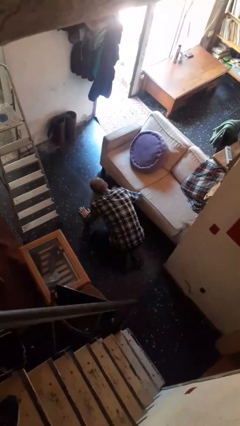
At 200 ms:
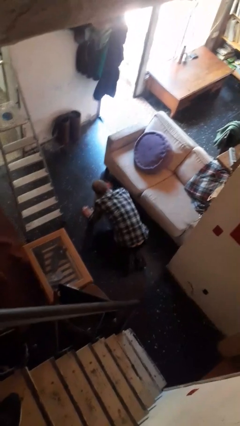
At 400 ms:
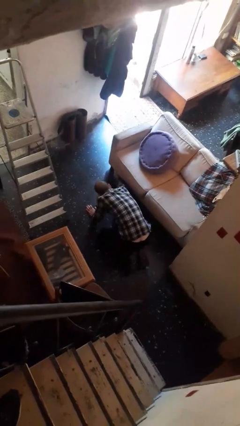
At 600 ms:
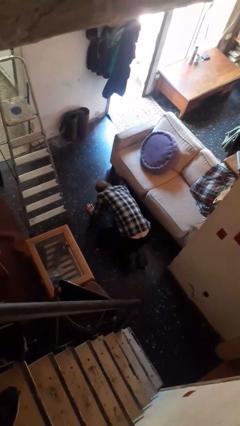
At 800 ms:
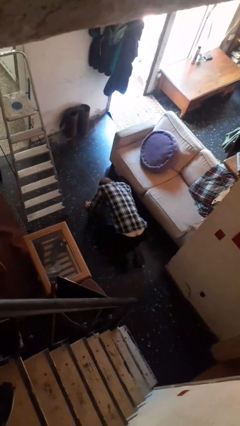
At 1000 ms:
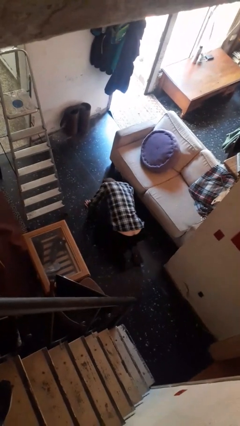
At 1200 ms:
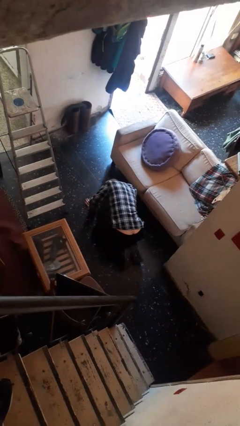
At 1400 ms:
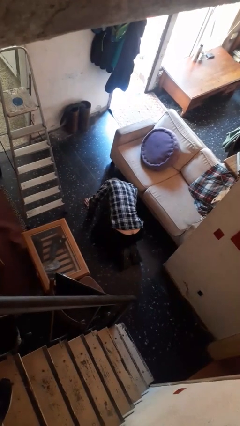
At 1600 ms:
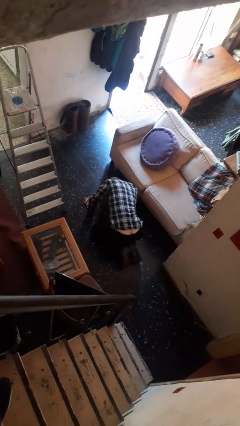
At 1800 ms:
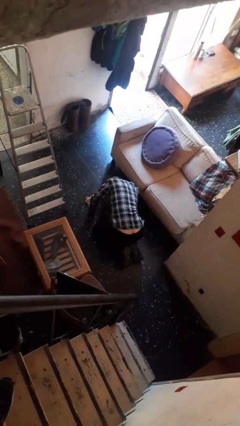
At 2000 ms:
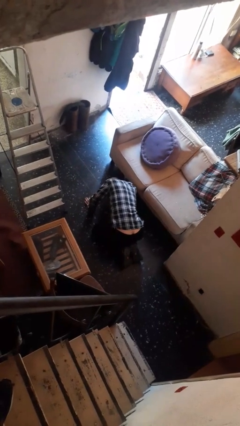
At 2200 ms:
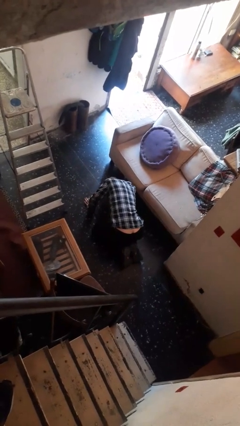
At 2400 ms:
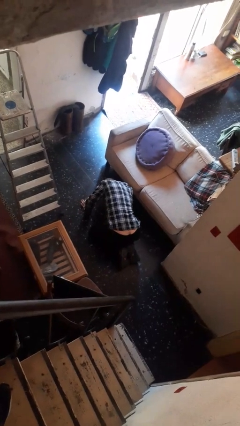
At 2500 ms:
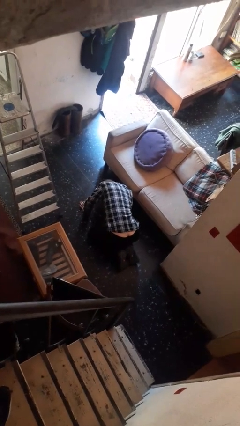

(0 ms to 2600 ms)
person searches under couch

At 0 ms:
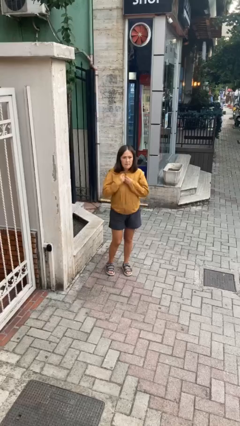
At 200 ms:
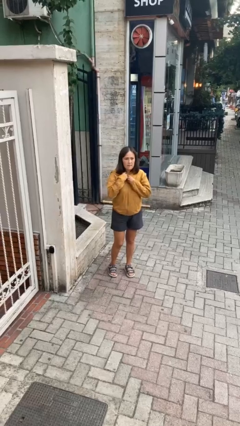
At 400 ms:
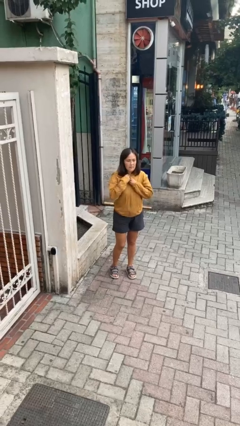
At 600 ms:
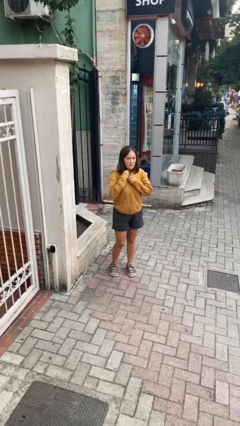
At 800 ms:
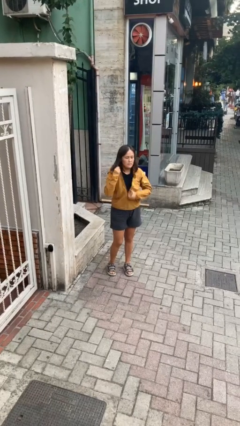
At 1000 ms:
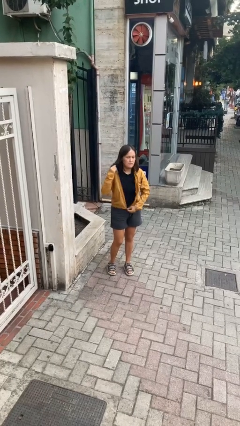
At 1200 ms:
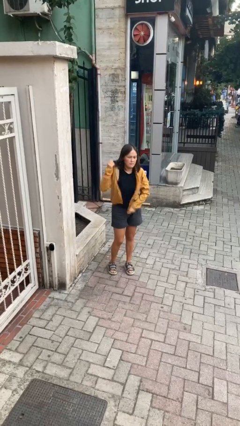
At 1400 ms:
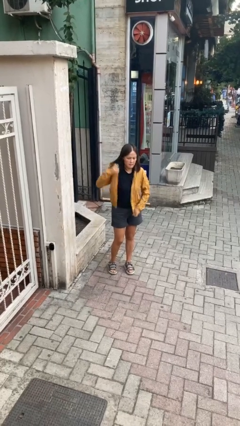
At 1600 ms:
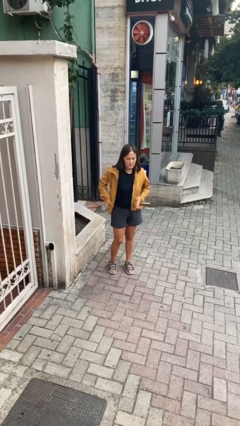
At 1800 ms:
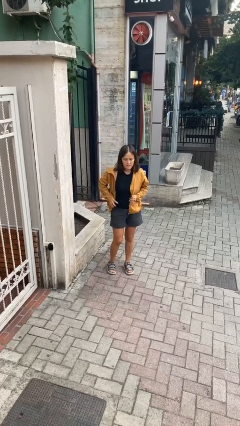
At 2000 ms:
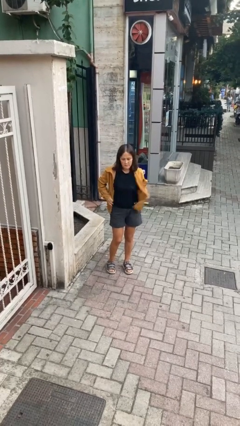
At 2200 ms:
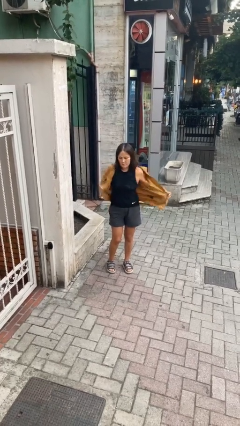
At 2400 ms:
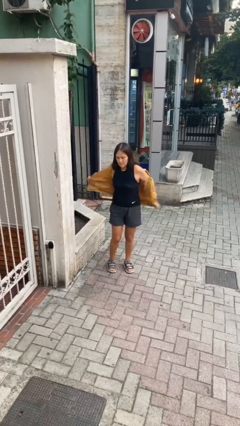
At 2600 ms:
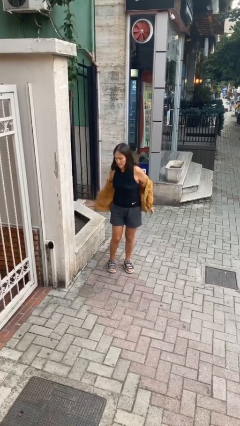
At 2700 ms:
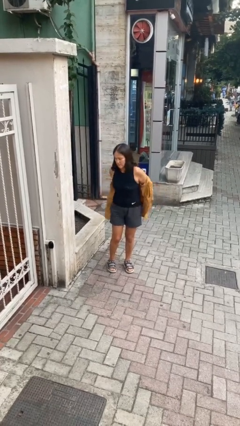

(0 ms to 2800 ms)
person unzips jacket

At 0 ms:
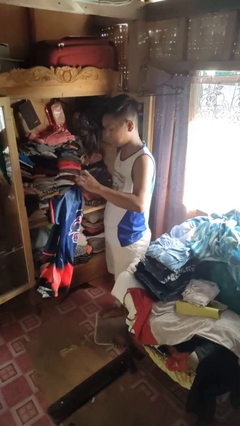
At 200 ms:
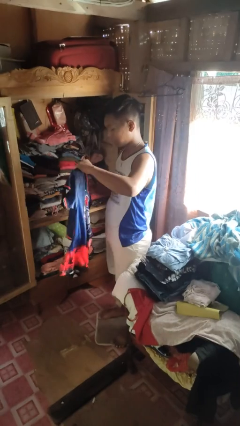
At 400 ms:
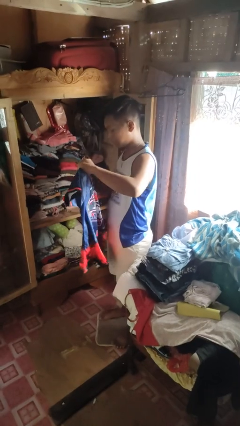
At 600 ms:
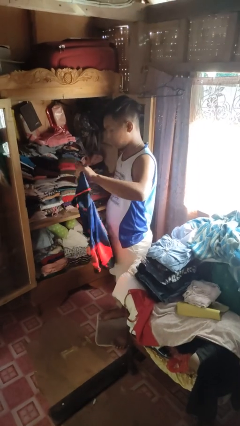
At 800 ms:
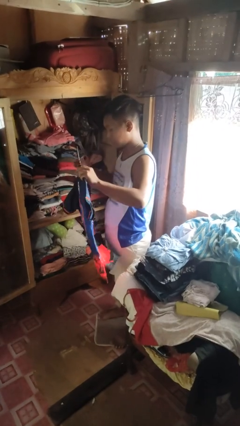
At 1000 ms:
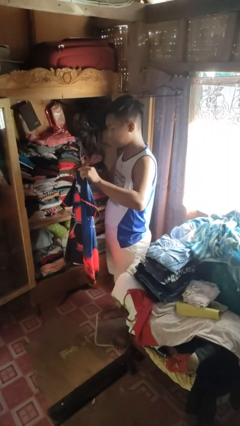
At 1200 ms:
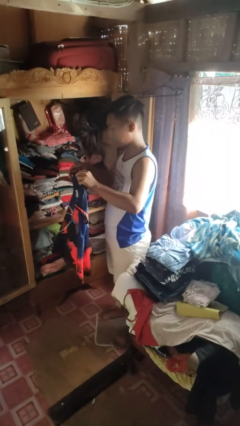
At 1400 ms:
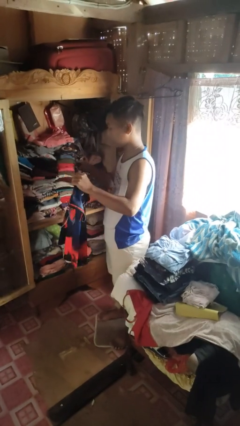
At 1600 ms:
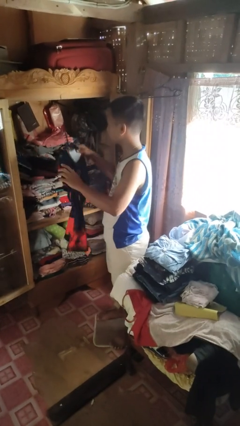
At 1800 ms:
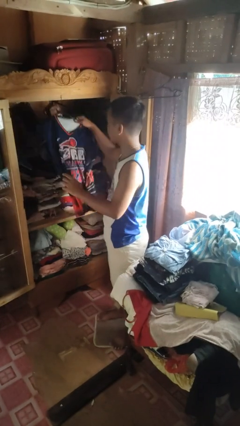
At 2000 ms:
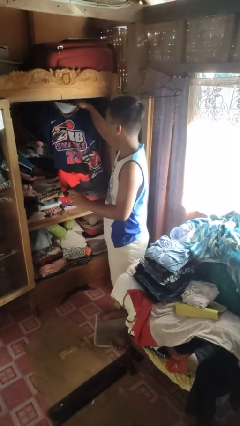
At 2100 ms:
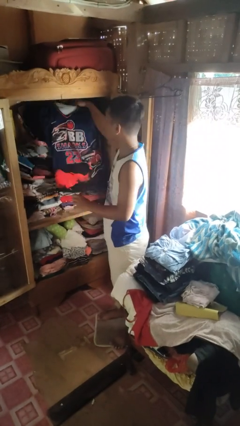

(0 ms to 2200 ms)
person puts clothes into closet

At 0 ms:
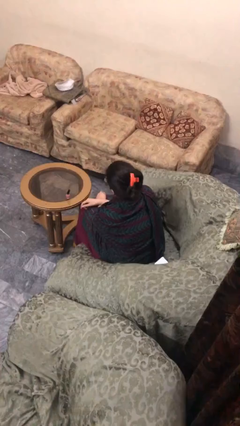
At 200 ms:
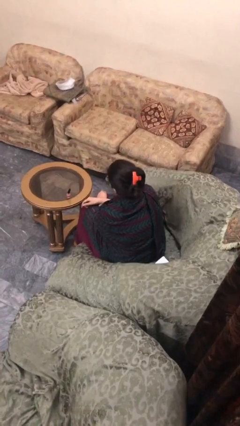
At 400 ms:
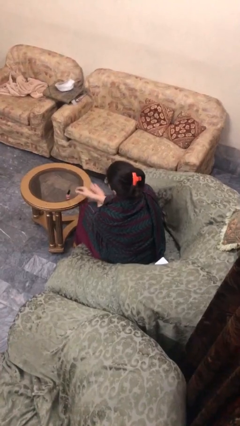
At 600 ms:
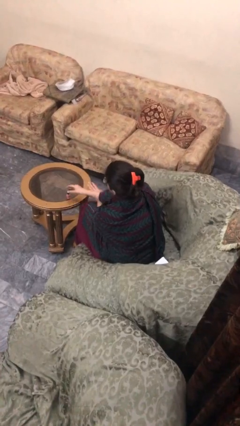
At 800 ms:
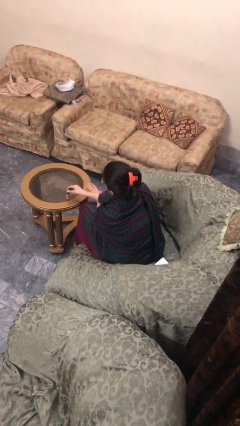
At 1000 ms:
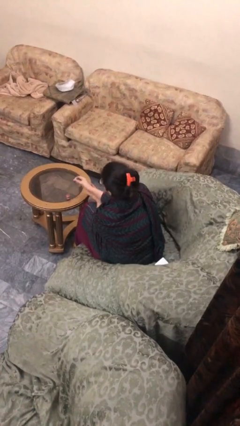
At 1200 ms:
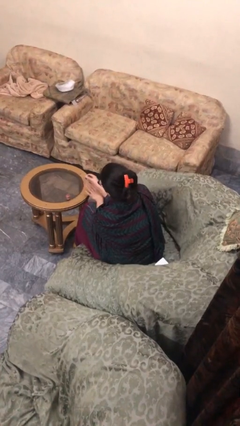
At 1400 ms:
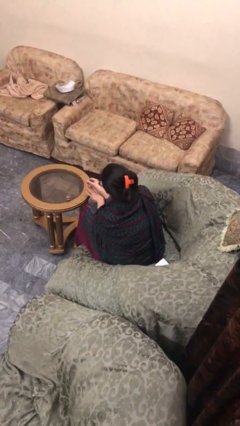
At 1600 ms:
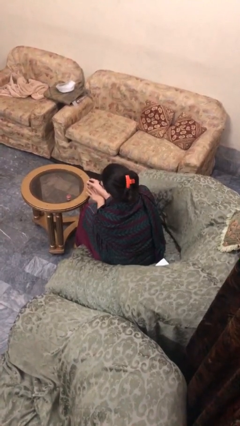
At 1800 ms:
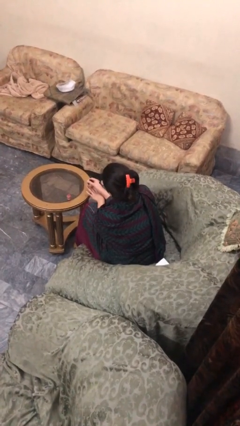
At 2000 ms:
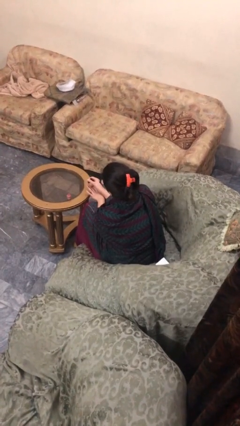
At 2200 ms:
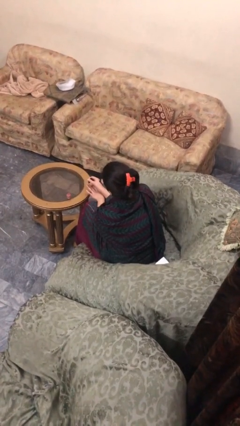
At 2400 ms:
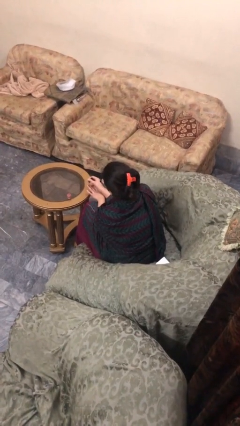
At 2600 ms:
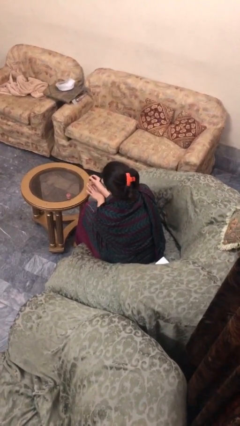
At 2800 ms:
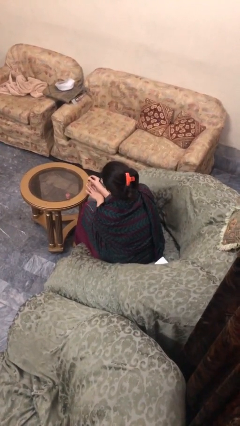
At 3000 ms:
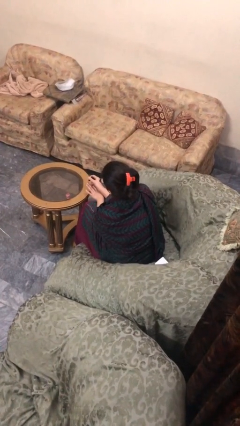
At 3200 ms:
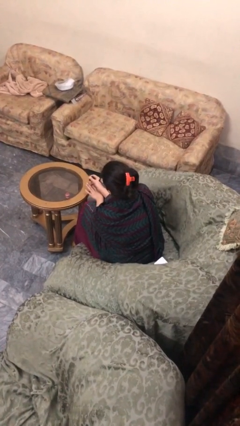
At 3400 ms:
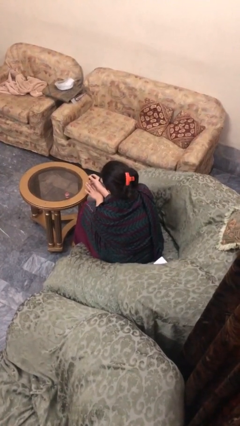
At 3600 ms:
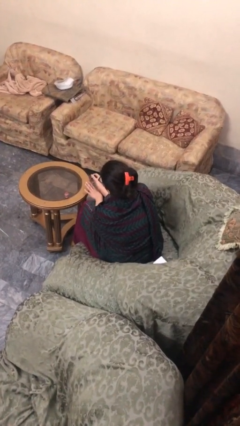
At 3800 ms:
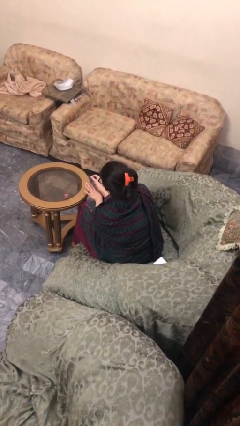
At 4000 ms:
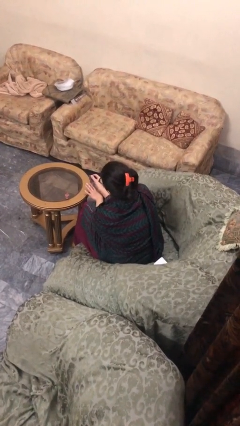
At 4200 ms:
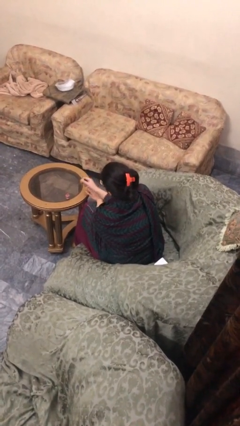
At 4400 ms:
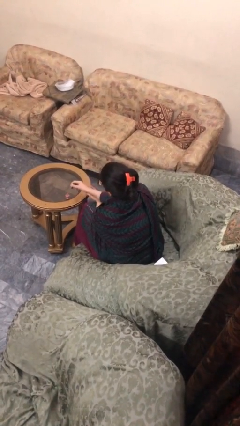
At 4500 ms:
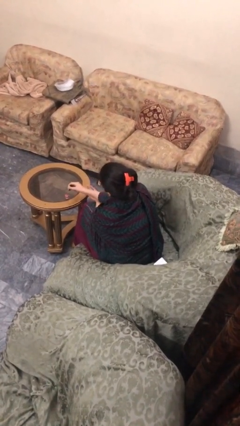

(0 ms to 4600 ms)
person paints fingernails

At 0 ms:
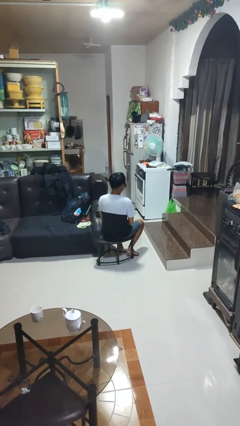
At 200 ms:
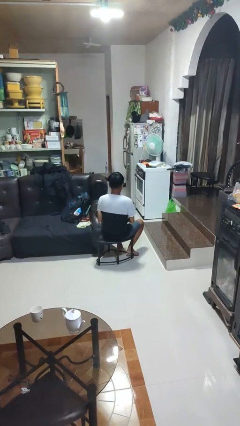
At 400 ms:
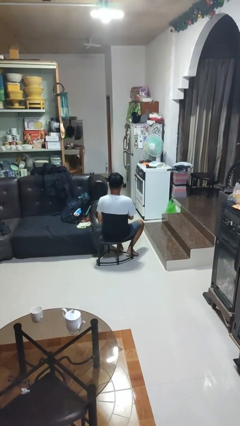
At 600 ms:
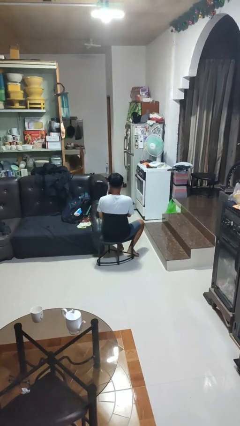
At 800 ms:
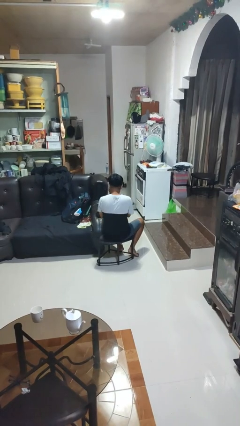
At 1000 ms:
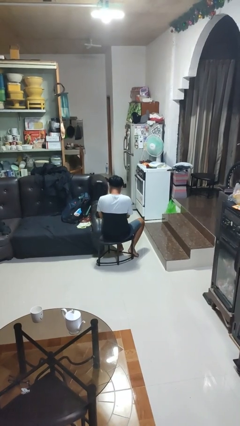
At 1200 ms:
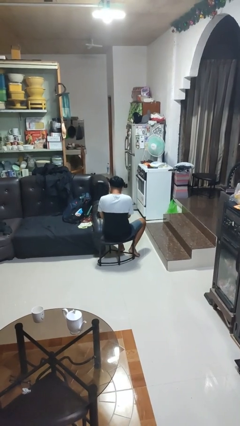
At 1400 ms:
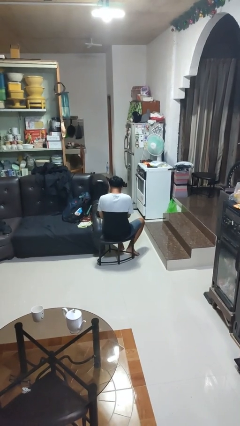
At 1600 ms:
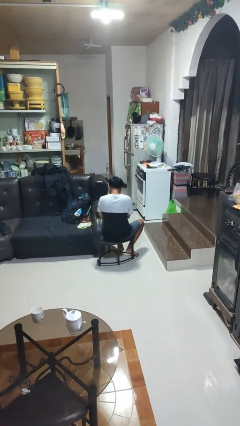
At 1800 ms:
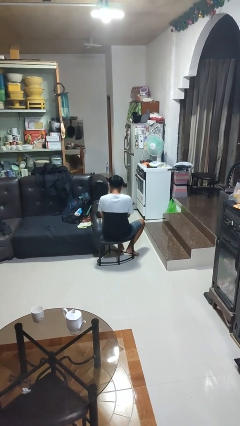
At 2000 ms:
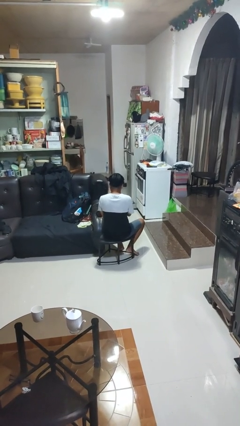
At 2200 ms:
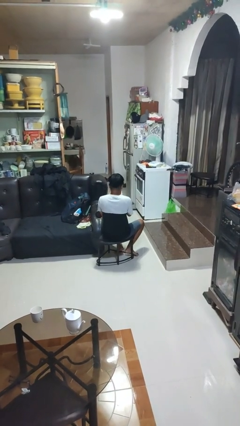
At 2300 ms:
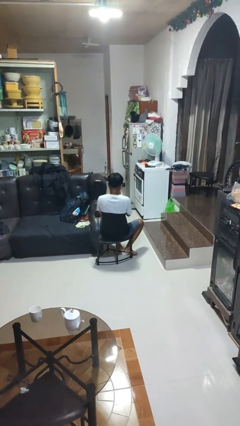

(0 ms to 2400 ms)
person blows nose

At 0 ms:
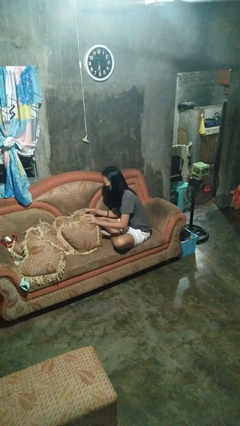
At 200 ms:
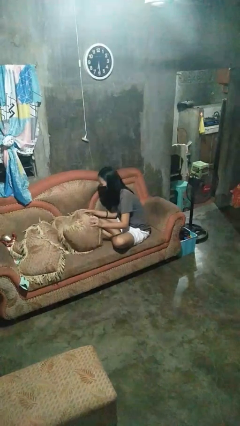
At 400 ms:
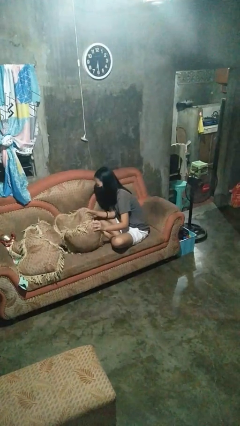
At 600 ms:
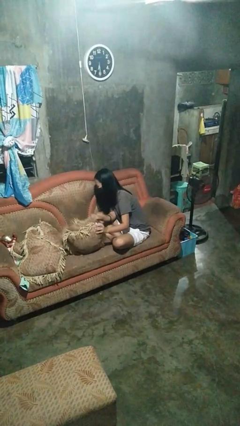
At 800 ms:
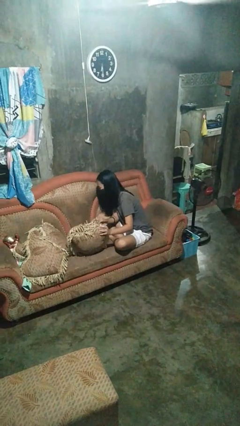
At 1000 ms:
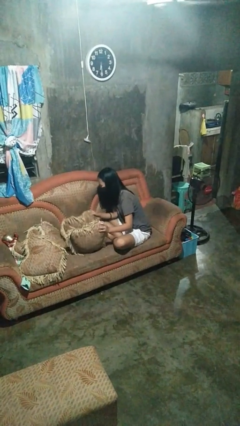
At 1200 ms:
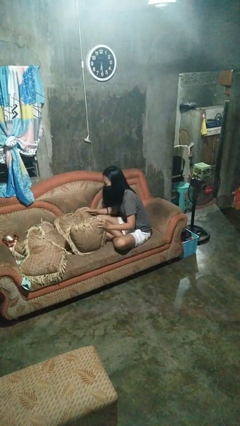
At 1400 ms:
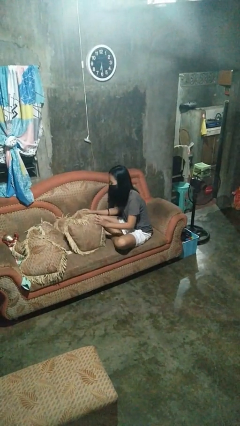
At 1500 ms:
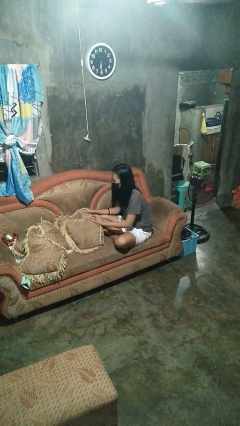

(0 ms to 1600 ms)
person searches in couch

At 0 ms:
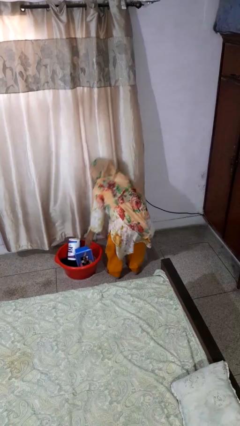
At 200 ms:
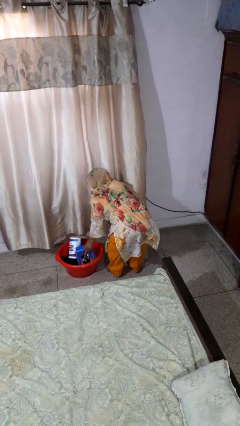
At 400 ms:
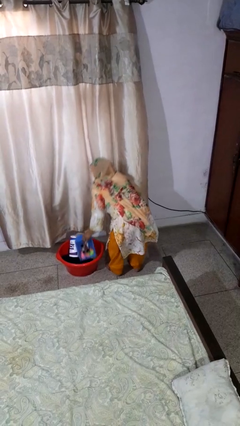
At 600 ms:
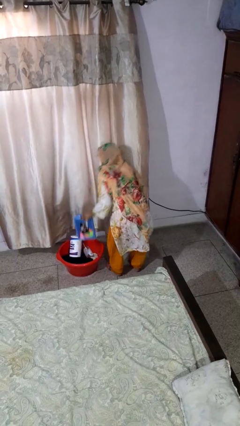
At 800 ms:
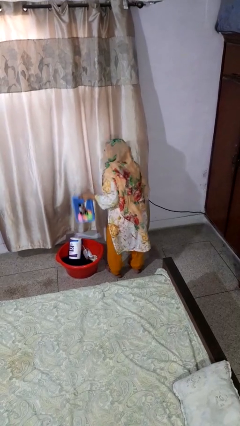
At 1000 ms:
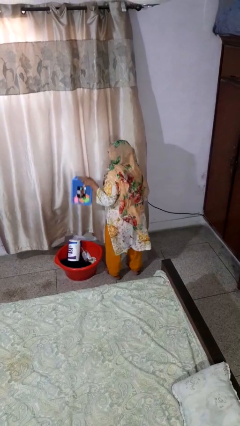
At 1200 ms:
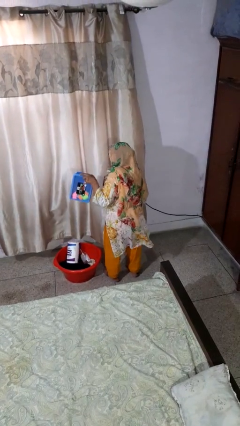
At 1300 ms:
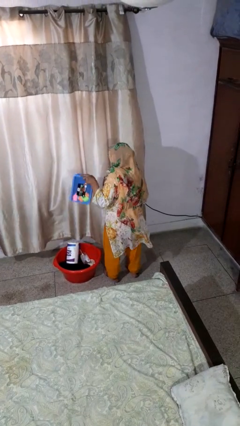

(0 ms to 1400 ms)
person takes object from basket
